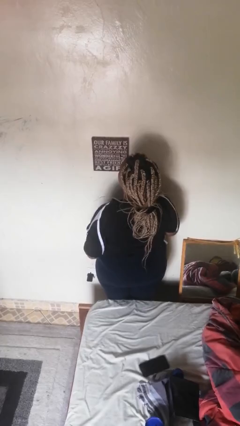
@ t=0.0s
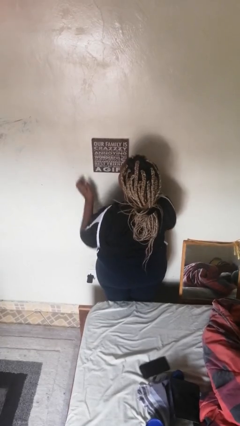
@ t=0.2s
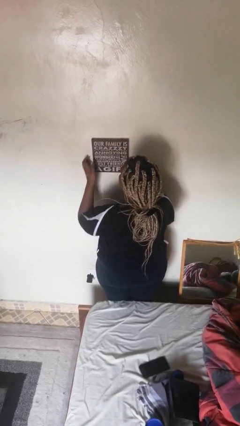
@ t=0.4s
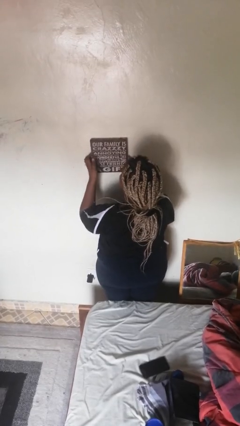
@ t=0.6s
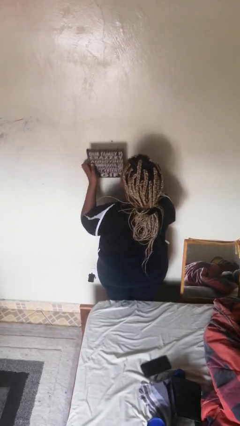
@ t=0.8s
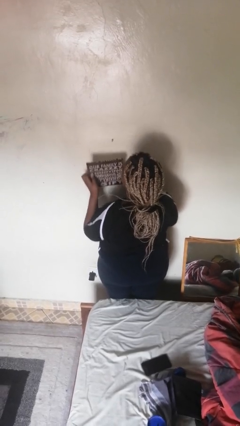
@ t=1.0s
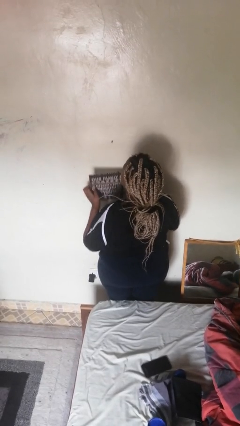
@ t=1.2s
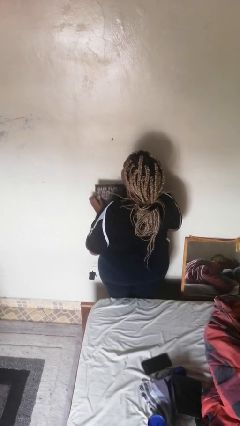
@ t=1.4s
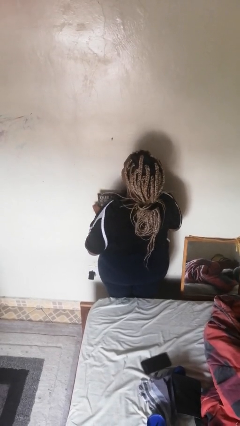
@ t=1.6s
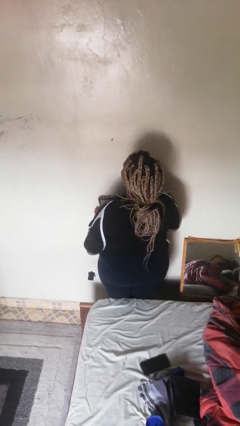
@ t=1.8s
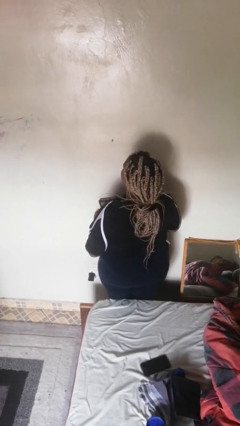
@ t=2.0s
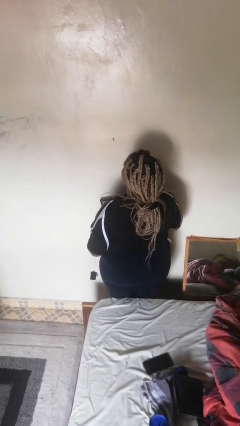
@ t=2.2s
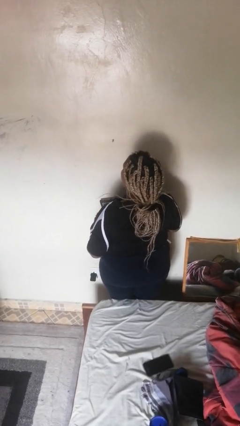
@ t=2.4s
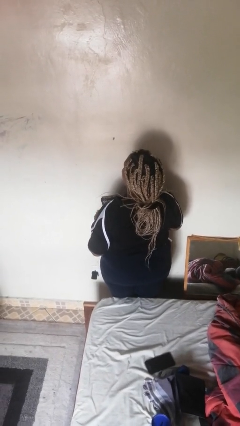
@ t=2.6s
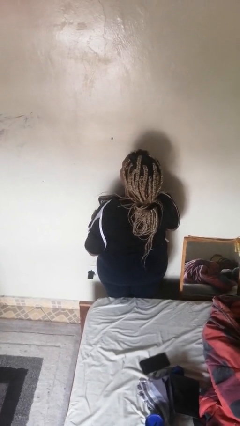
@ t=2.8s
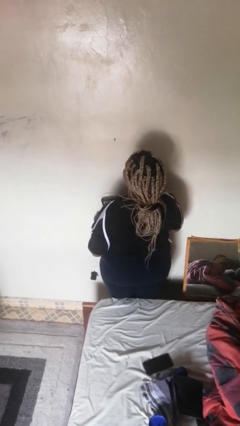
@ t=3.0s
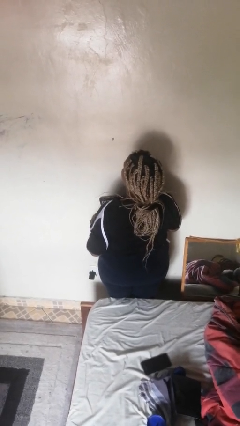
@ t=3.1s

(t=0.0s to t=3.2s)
person takes down picture frame

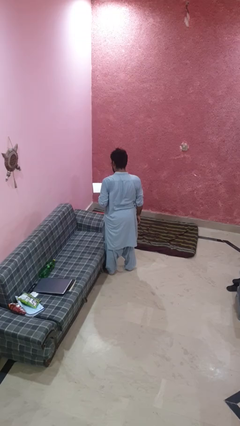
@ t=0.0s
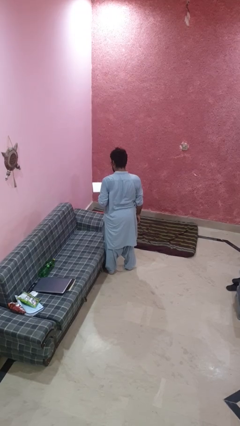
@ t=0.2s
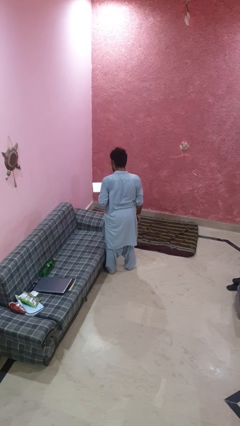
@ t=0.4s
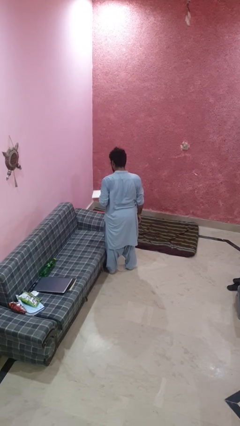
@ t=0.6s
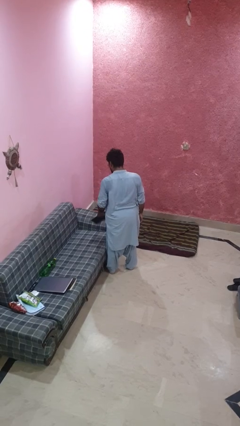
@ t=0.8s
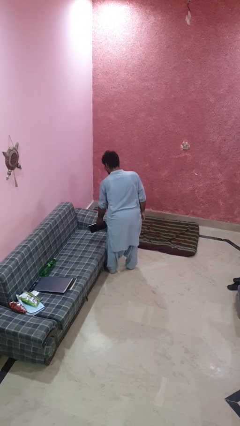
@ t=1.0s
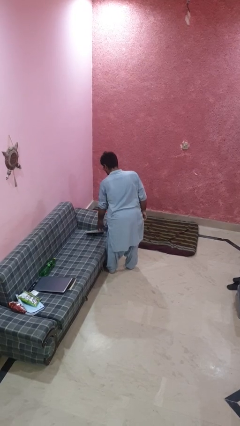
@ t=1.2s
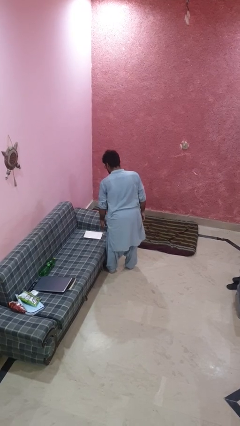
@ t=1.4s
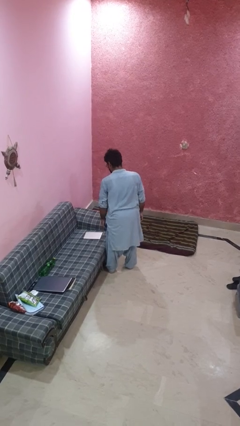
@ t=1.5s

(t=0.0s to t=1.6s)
person puts down object on couch

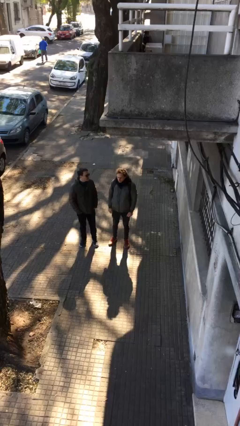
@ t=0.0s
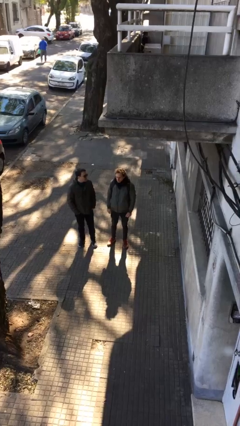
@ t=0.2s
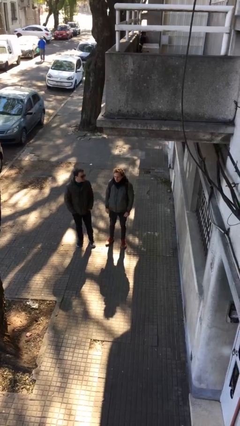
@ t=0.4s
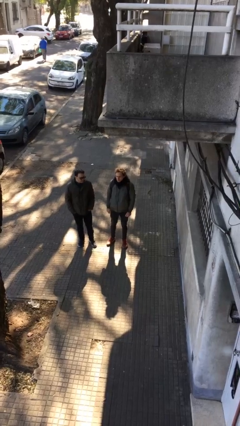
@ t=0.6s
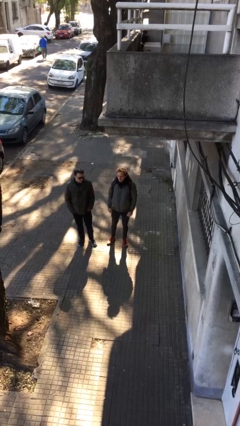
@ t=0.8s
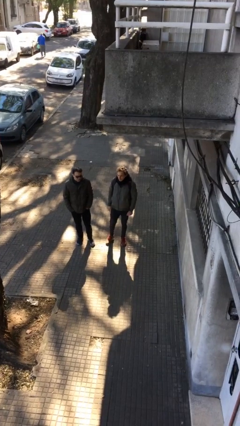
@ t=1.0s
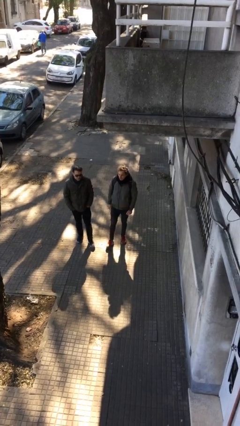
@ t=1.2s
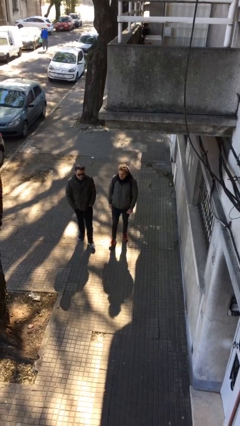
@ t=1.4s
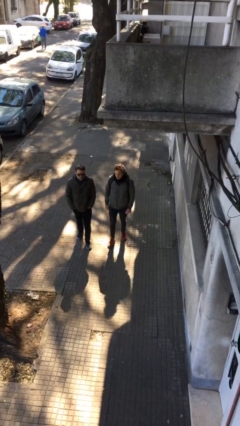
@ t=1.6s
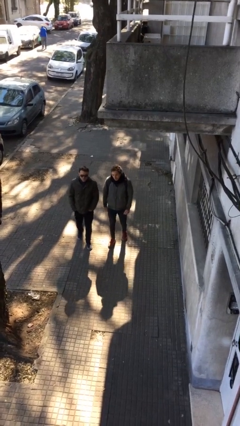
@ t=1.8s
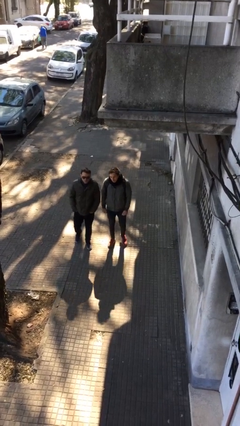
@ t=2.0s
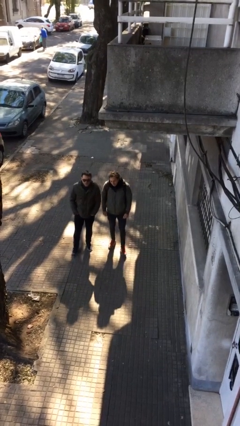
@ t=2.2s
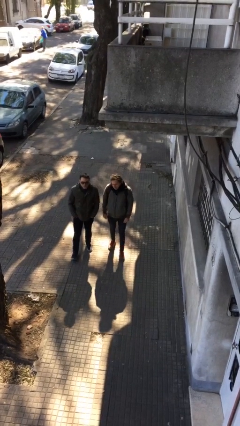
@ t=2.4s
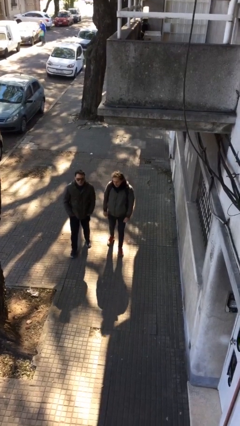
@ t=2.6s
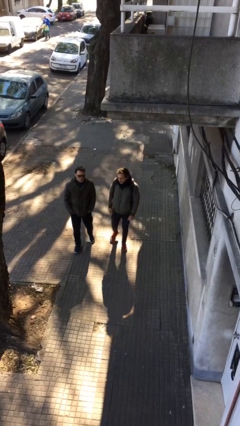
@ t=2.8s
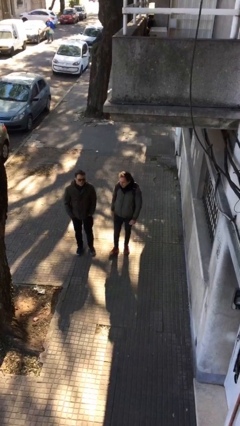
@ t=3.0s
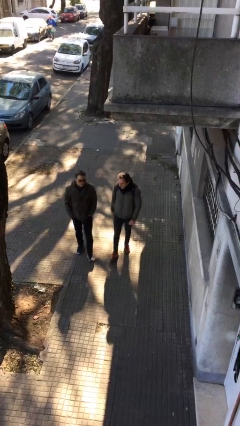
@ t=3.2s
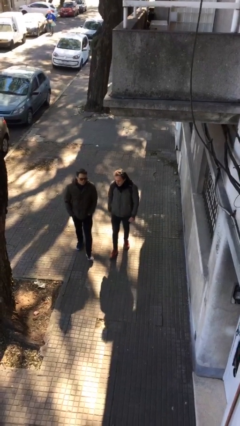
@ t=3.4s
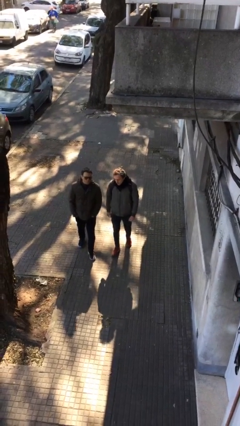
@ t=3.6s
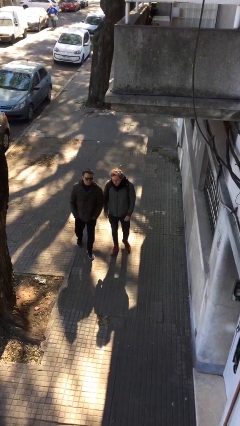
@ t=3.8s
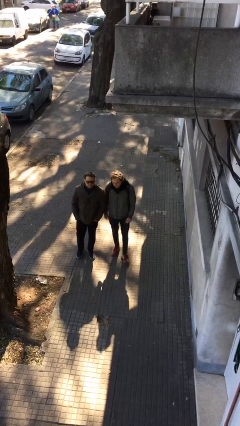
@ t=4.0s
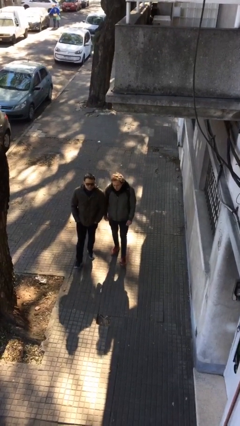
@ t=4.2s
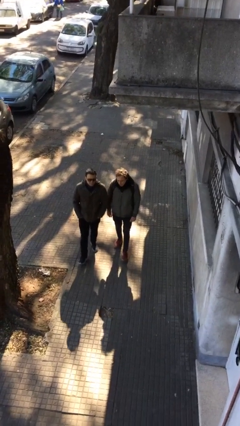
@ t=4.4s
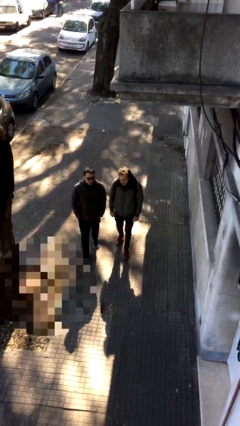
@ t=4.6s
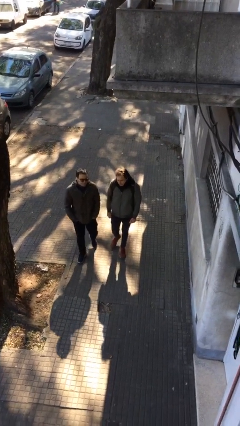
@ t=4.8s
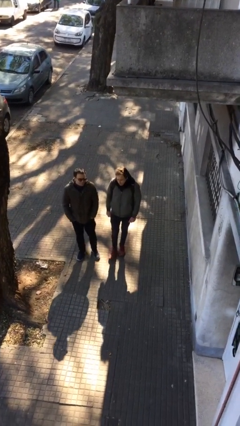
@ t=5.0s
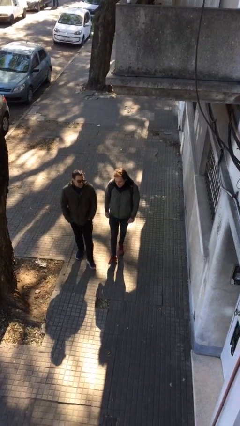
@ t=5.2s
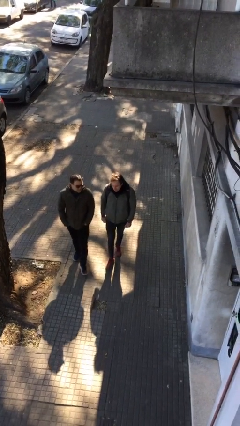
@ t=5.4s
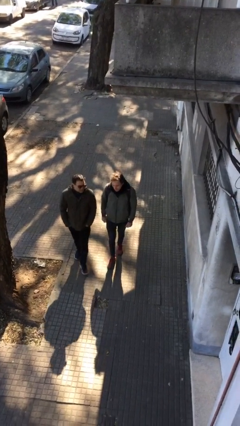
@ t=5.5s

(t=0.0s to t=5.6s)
person talks to person

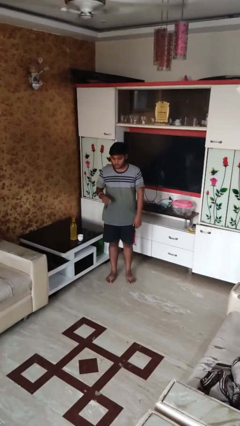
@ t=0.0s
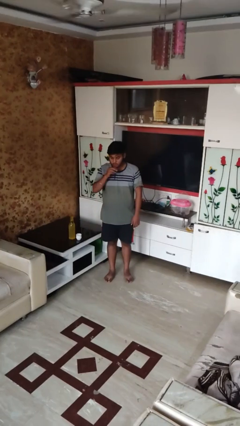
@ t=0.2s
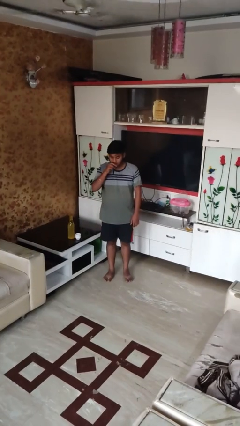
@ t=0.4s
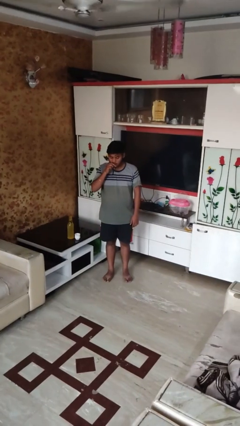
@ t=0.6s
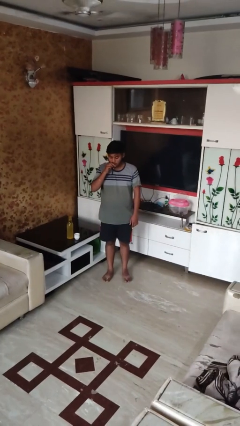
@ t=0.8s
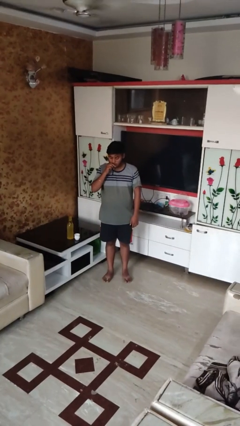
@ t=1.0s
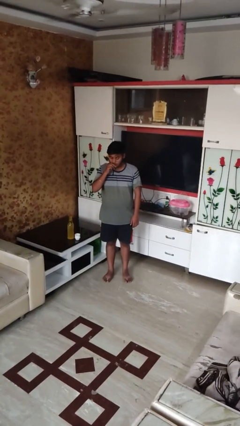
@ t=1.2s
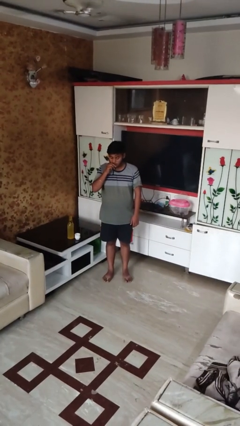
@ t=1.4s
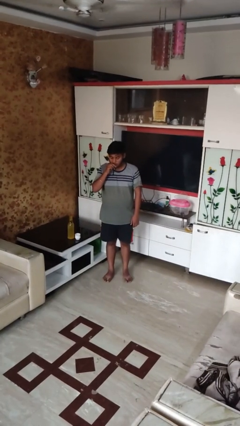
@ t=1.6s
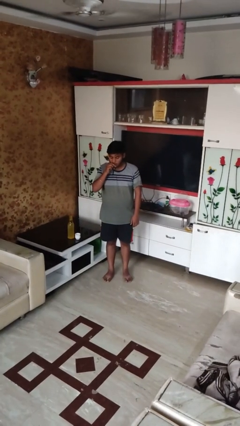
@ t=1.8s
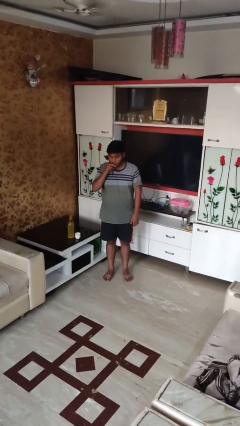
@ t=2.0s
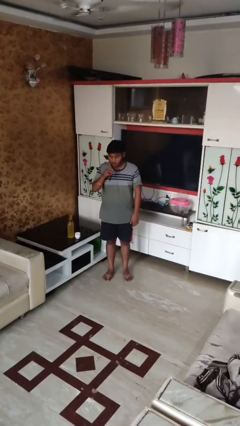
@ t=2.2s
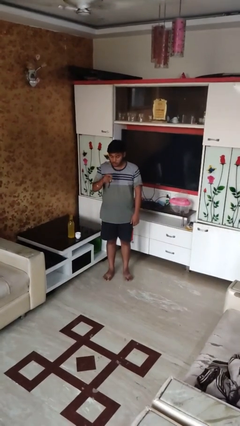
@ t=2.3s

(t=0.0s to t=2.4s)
person vapes

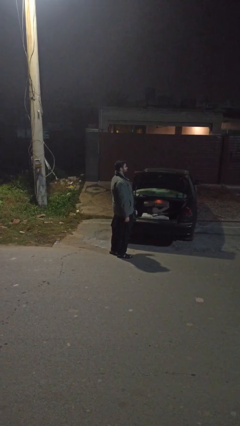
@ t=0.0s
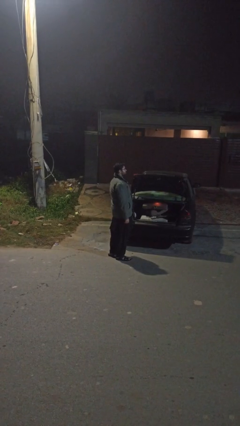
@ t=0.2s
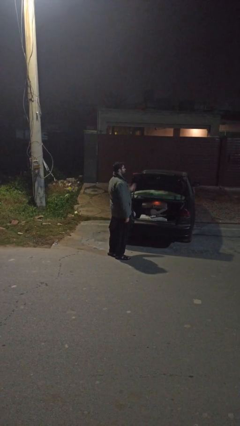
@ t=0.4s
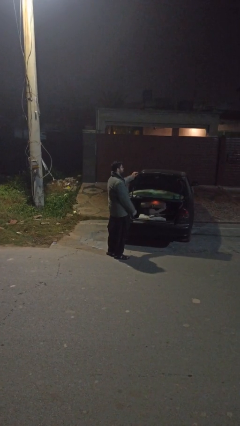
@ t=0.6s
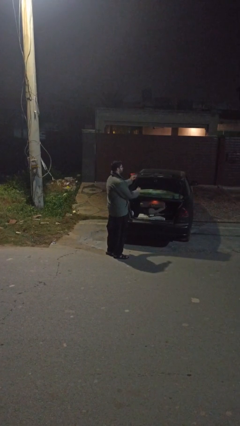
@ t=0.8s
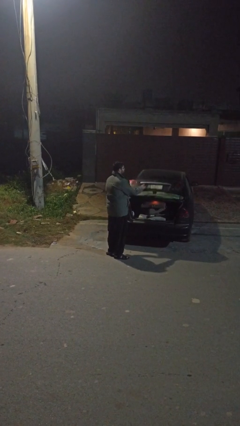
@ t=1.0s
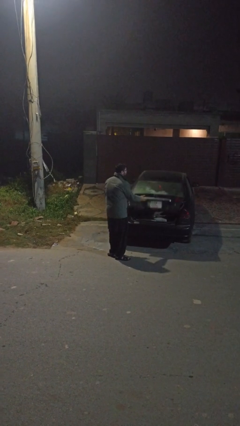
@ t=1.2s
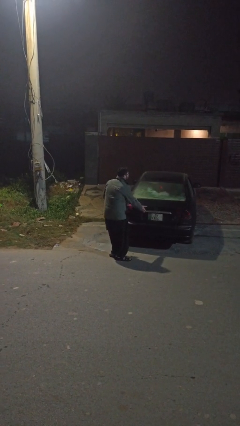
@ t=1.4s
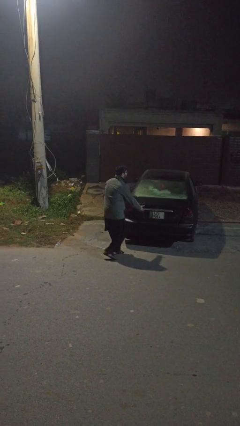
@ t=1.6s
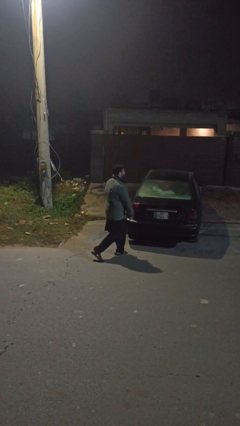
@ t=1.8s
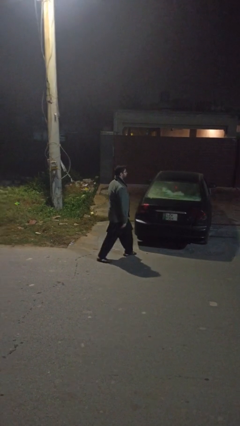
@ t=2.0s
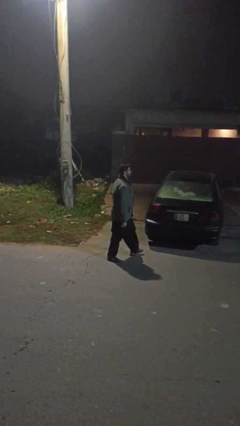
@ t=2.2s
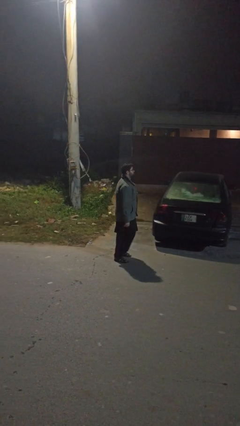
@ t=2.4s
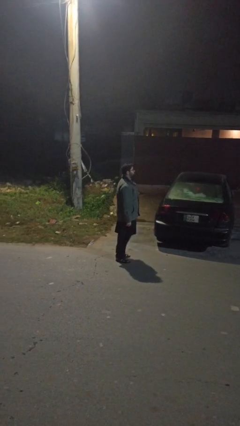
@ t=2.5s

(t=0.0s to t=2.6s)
person closes car trunk

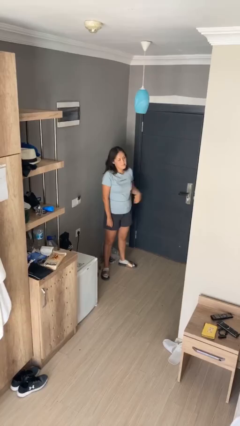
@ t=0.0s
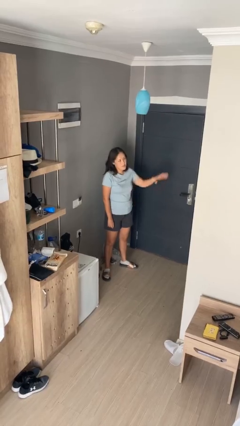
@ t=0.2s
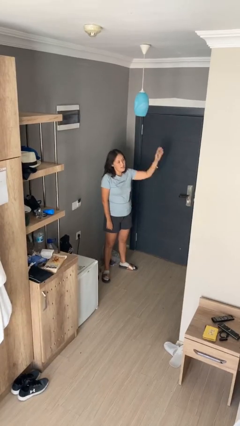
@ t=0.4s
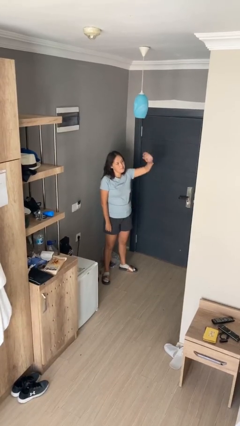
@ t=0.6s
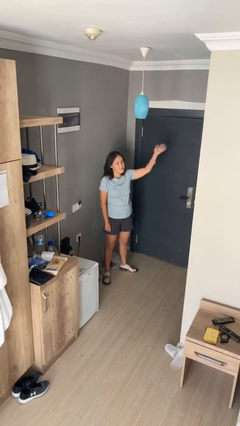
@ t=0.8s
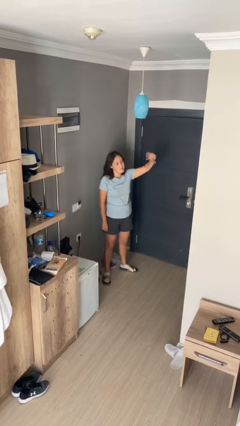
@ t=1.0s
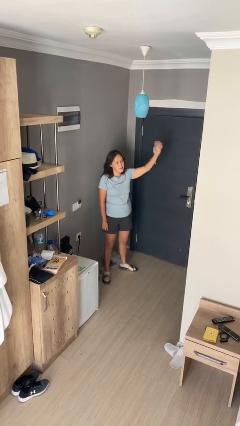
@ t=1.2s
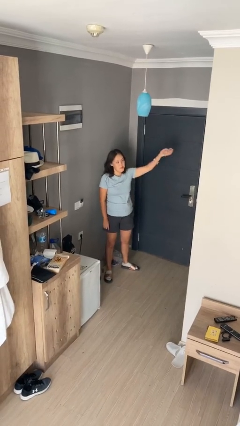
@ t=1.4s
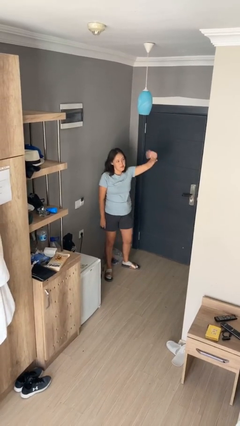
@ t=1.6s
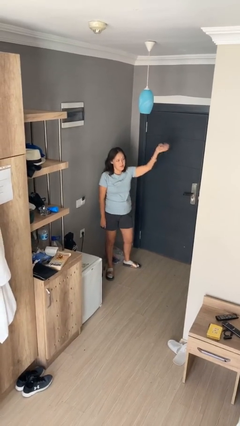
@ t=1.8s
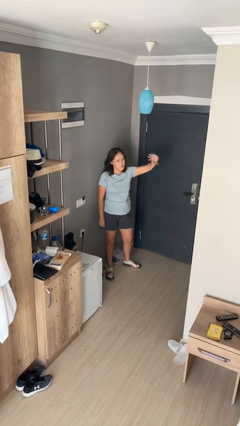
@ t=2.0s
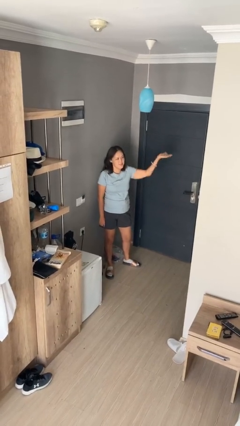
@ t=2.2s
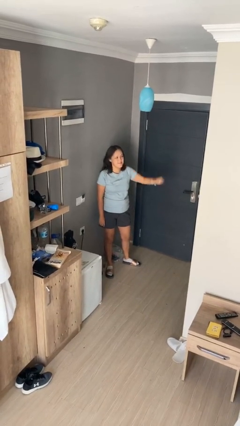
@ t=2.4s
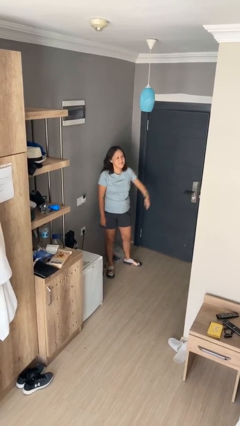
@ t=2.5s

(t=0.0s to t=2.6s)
person waves at person
